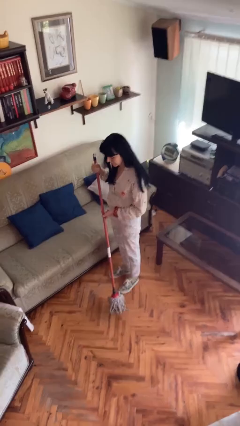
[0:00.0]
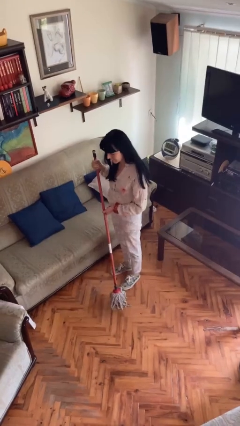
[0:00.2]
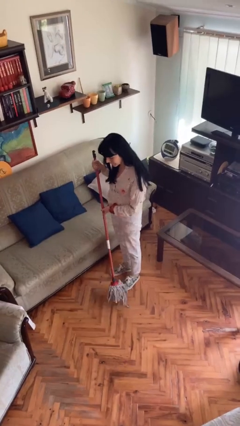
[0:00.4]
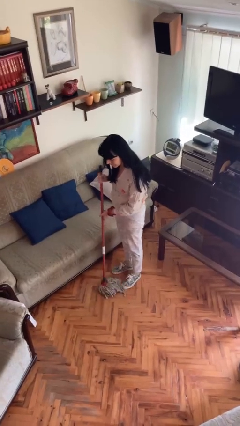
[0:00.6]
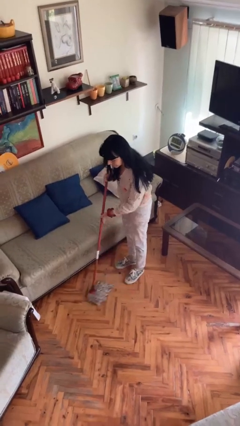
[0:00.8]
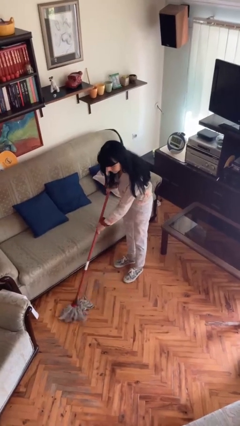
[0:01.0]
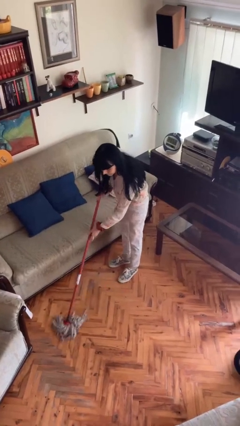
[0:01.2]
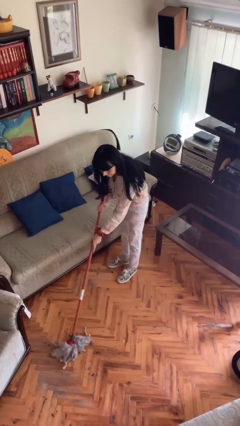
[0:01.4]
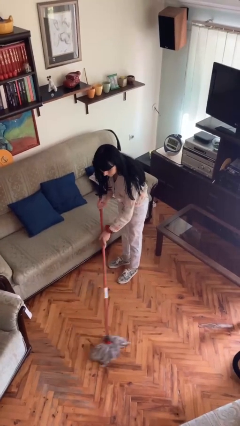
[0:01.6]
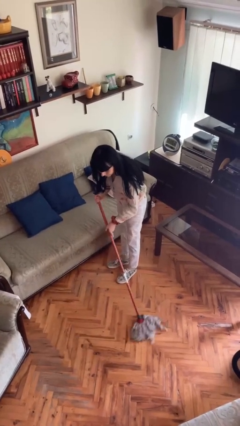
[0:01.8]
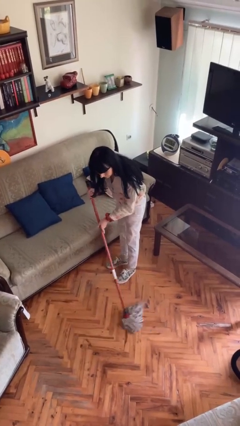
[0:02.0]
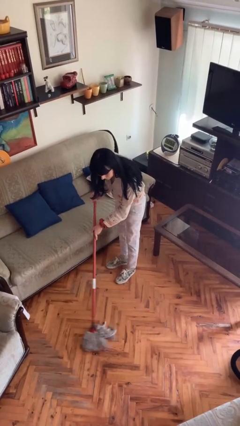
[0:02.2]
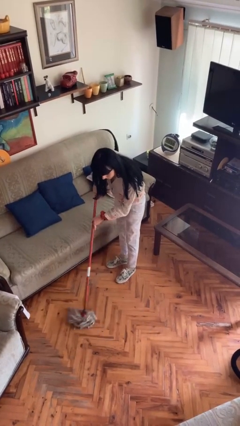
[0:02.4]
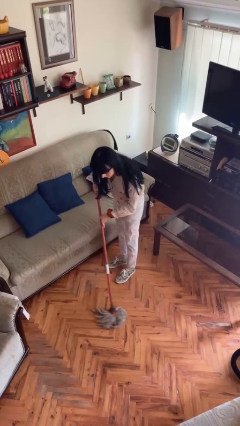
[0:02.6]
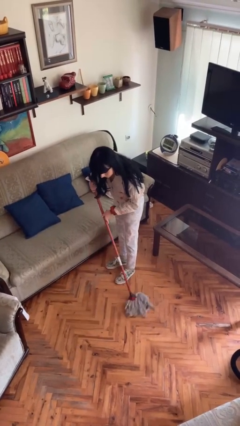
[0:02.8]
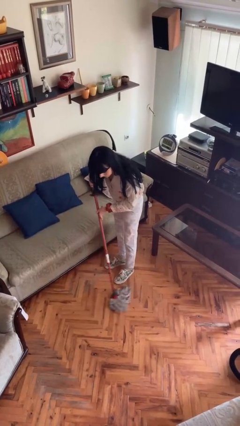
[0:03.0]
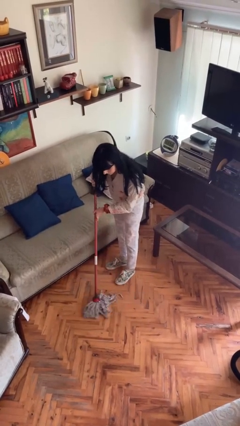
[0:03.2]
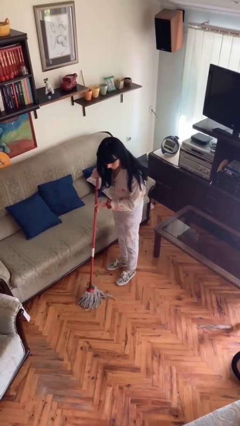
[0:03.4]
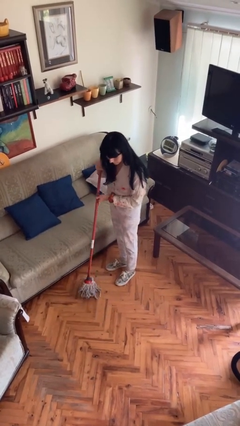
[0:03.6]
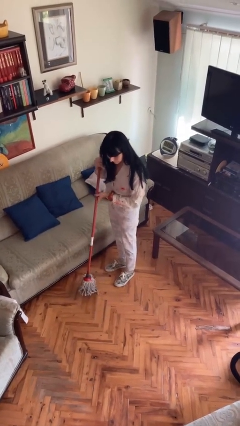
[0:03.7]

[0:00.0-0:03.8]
person sweeps floor

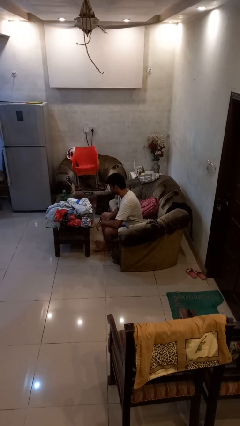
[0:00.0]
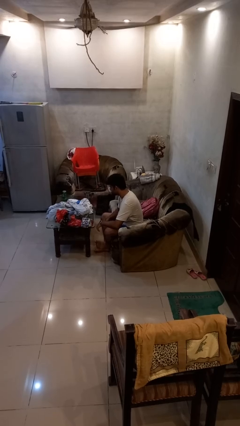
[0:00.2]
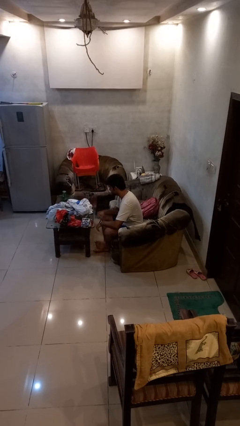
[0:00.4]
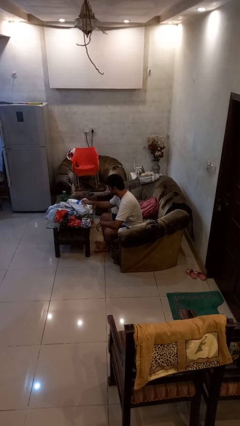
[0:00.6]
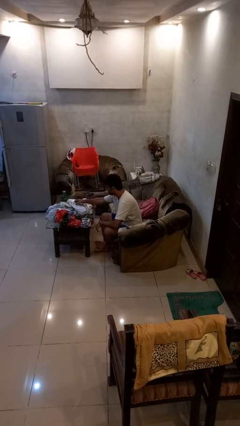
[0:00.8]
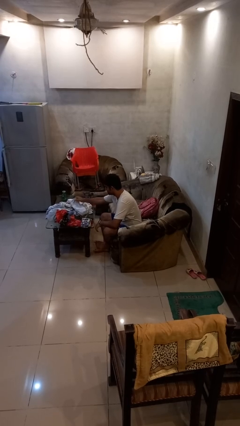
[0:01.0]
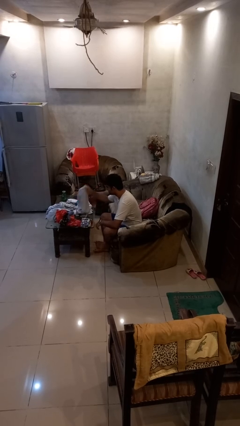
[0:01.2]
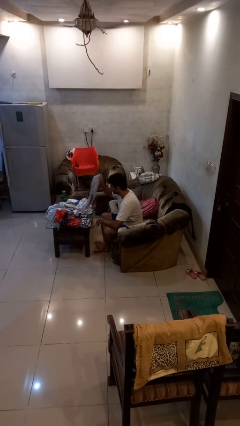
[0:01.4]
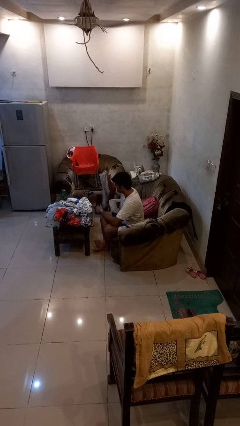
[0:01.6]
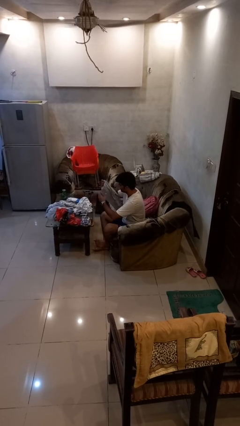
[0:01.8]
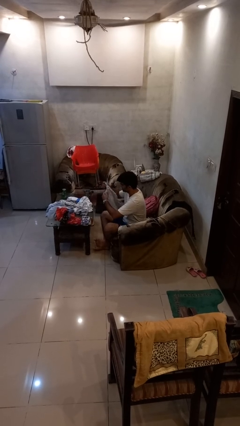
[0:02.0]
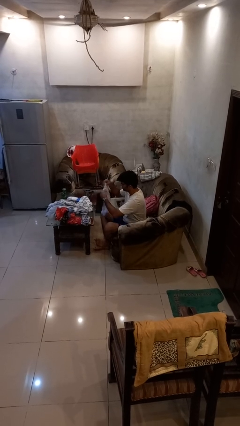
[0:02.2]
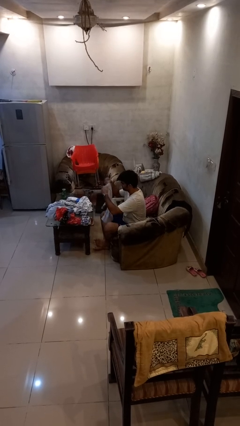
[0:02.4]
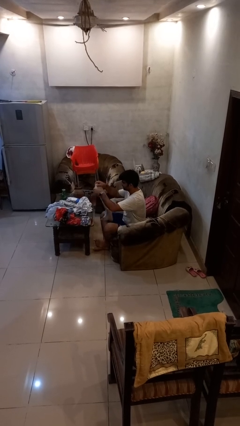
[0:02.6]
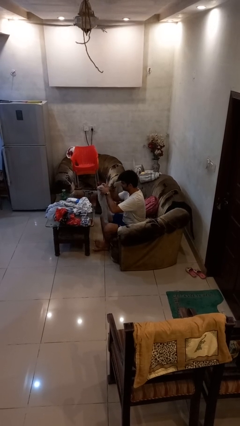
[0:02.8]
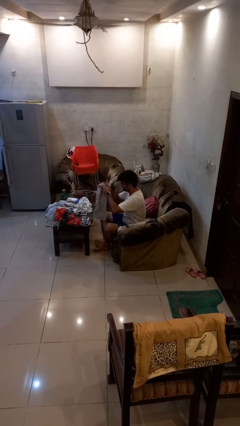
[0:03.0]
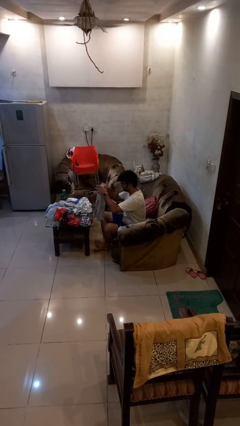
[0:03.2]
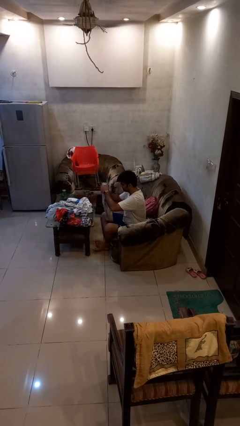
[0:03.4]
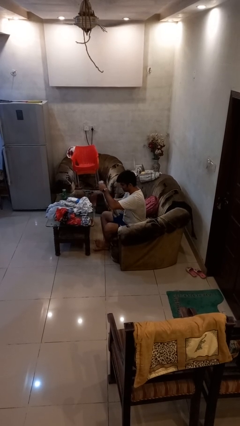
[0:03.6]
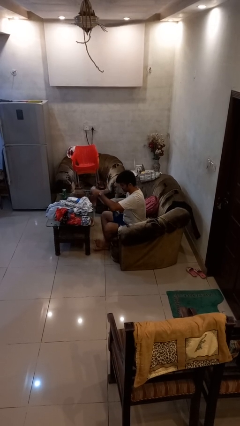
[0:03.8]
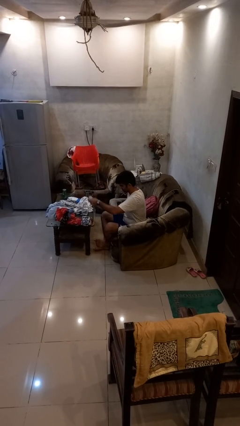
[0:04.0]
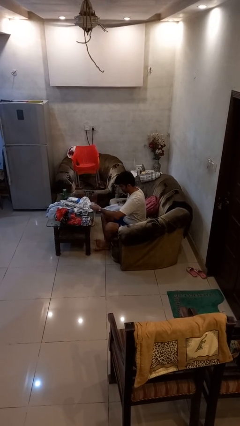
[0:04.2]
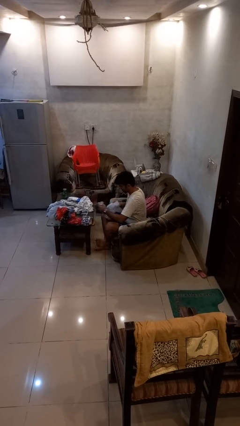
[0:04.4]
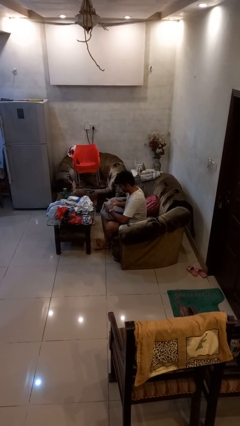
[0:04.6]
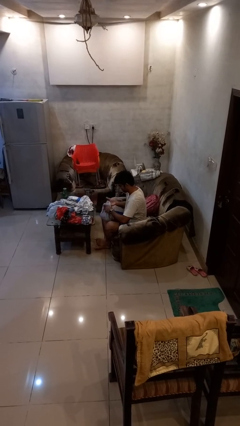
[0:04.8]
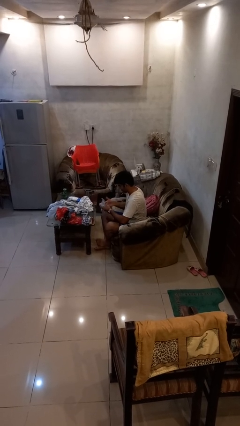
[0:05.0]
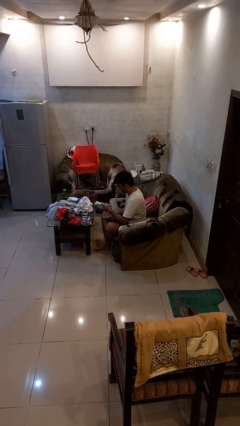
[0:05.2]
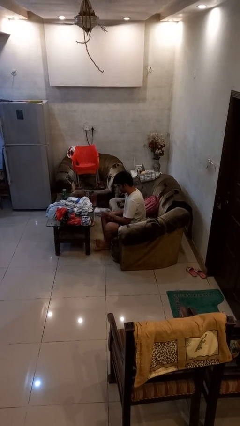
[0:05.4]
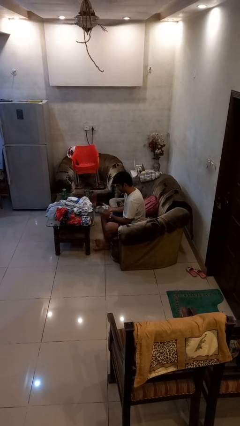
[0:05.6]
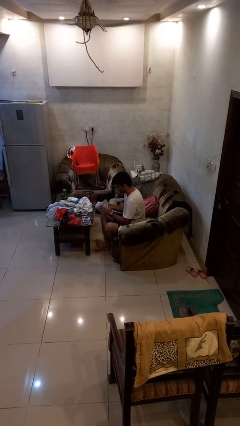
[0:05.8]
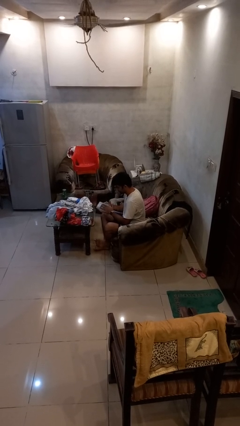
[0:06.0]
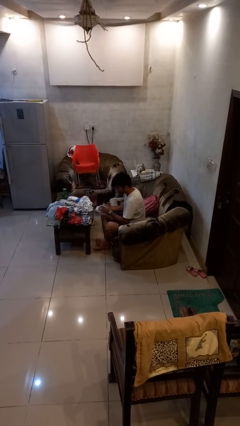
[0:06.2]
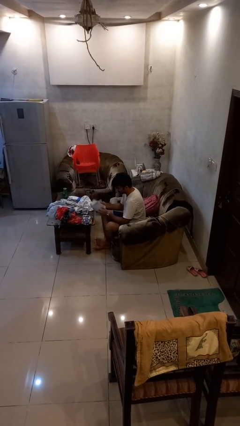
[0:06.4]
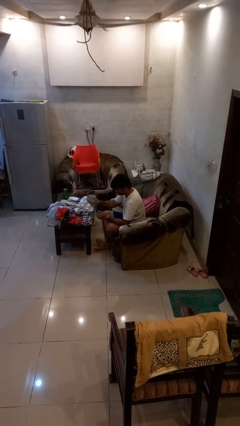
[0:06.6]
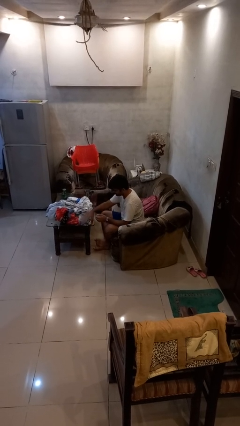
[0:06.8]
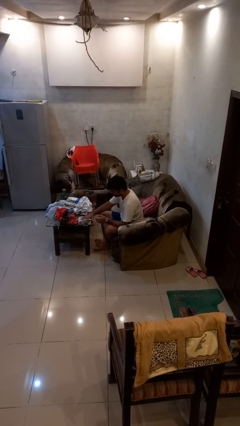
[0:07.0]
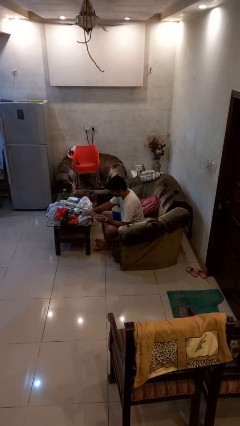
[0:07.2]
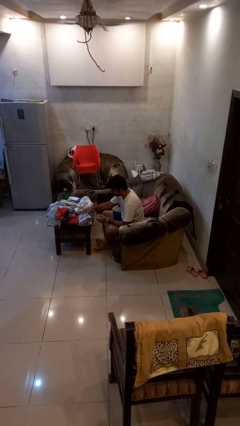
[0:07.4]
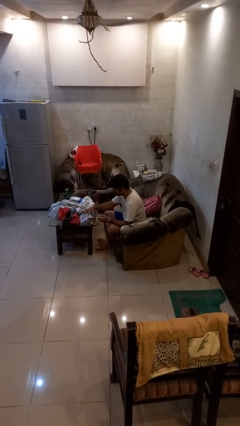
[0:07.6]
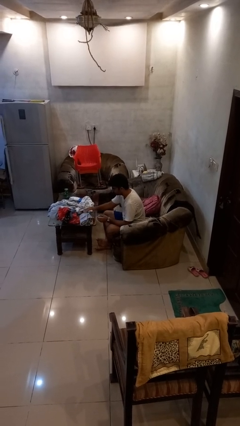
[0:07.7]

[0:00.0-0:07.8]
person folds pants

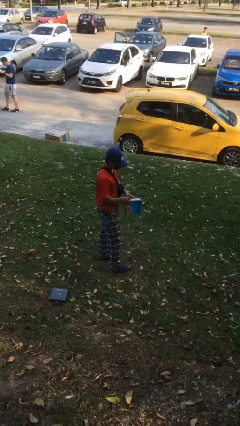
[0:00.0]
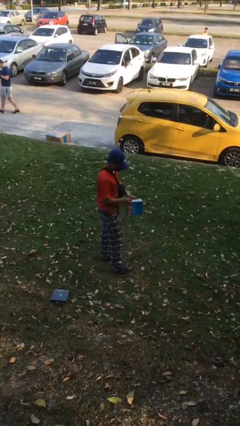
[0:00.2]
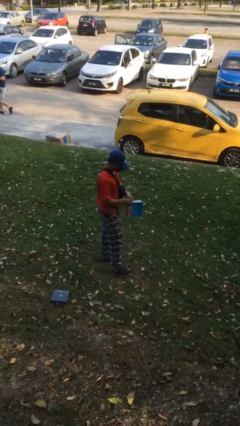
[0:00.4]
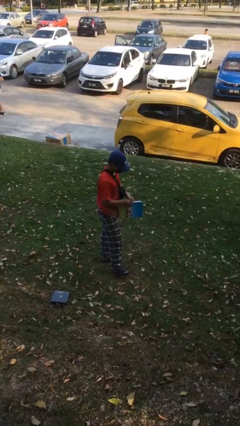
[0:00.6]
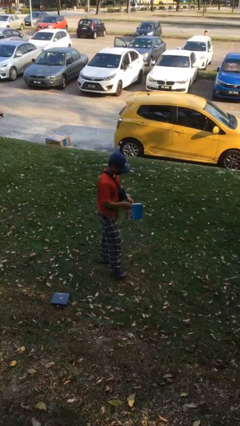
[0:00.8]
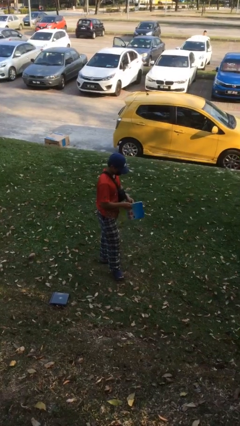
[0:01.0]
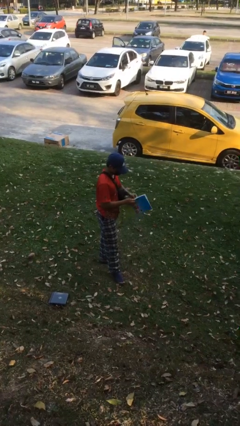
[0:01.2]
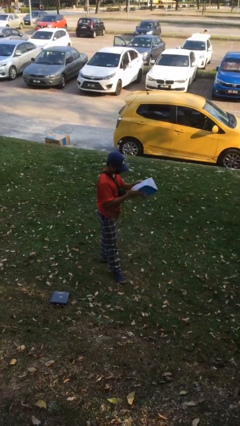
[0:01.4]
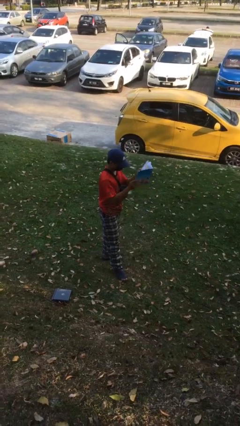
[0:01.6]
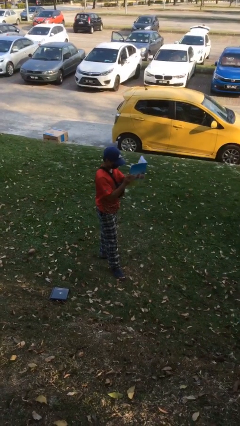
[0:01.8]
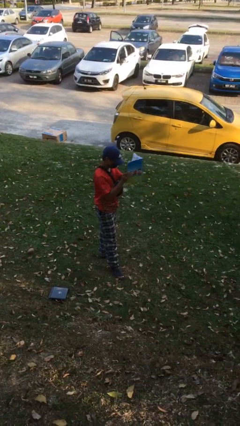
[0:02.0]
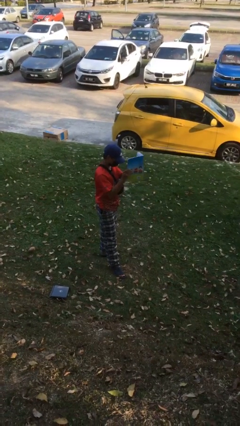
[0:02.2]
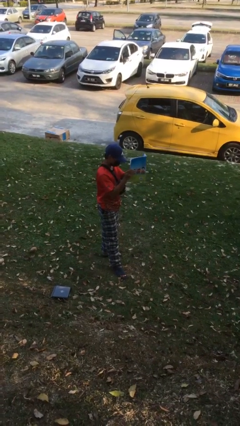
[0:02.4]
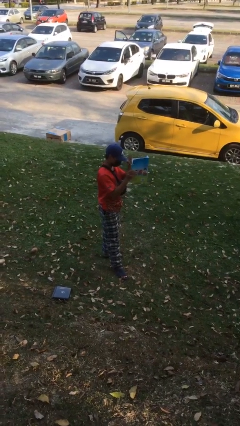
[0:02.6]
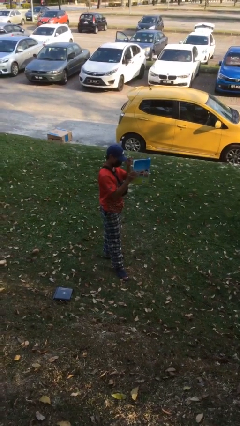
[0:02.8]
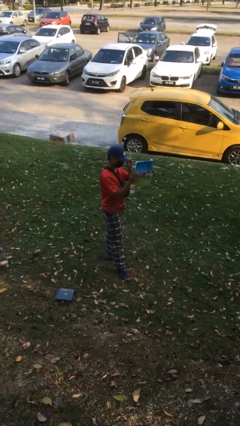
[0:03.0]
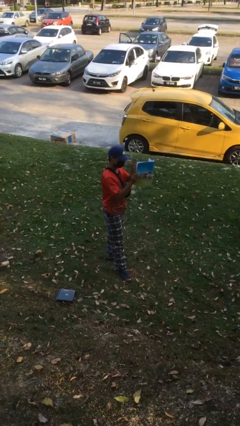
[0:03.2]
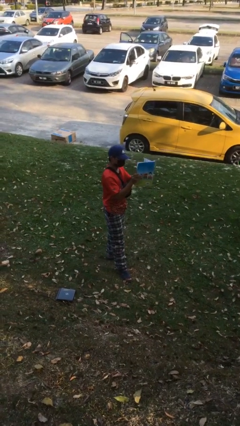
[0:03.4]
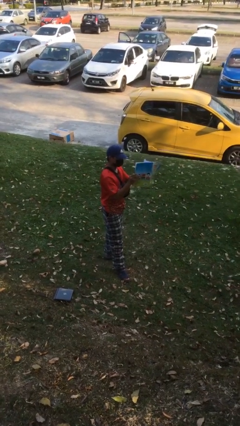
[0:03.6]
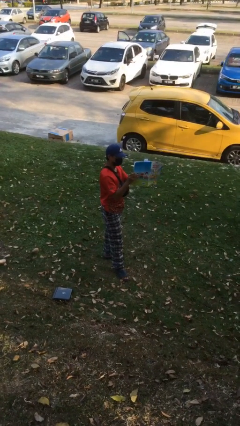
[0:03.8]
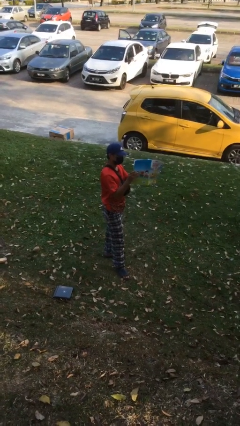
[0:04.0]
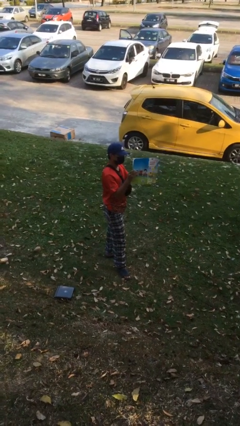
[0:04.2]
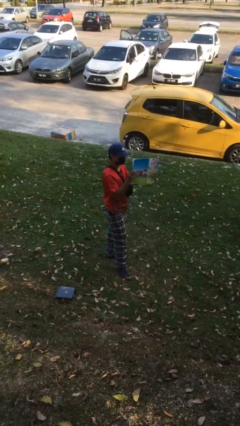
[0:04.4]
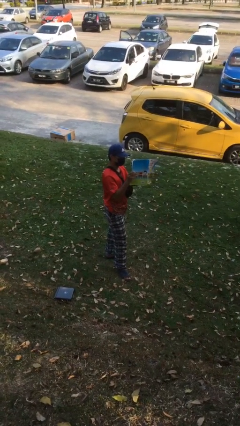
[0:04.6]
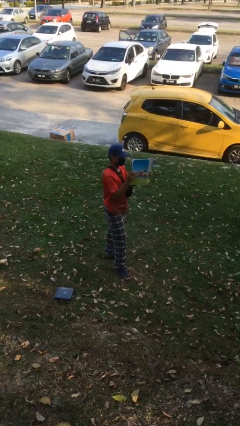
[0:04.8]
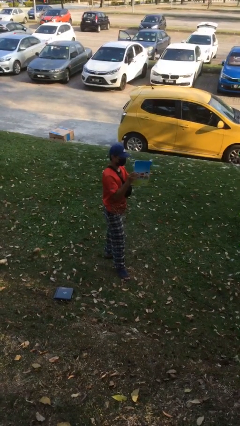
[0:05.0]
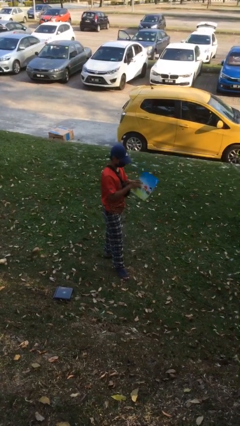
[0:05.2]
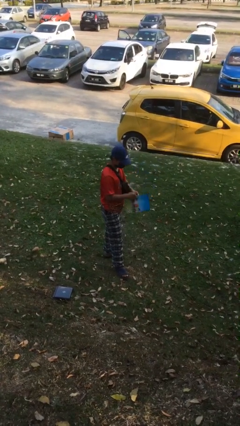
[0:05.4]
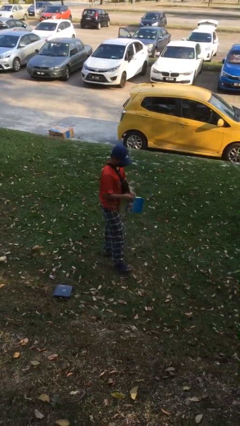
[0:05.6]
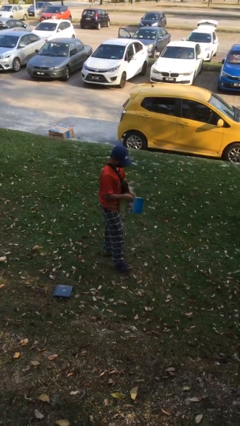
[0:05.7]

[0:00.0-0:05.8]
person reads document

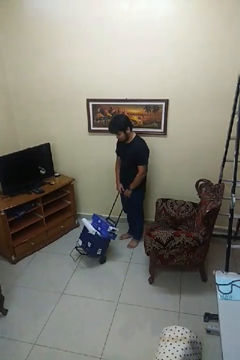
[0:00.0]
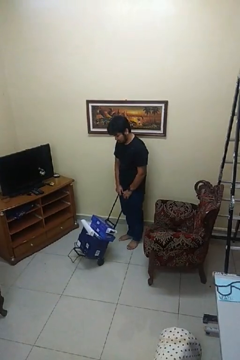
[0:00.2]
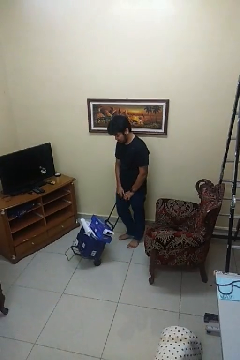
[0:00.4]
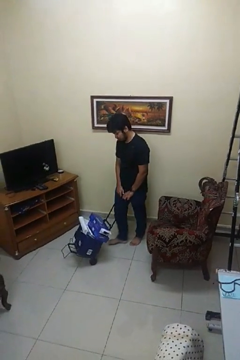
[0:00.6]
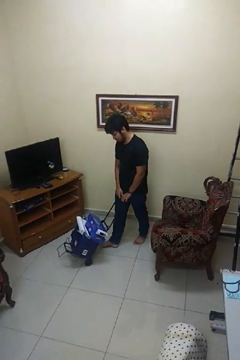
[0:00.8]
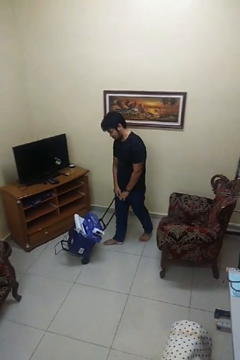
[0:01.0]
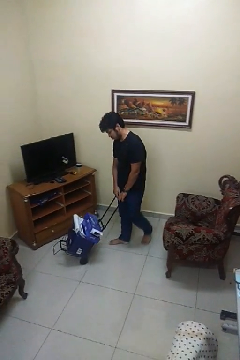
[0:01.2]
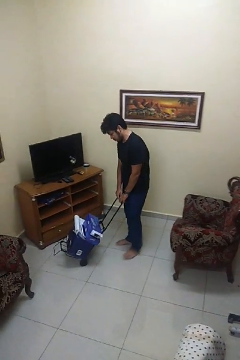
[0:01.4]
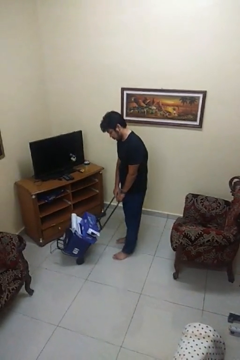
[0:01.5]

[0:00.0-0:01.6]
person pushes wheeled cart
